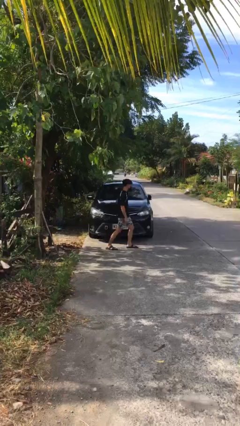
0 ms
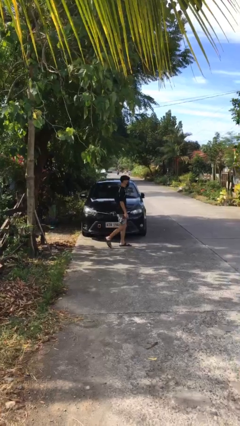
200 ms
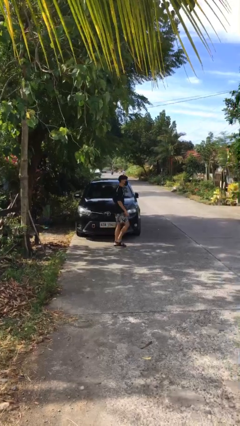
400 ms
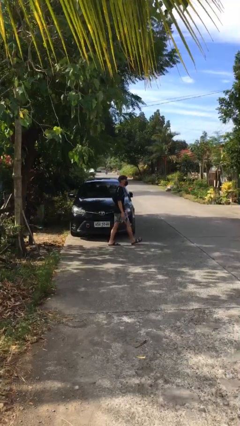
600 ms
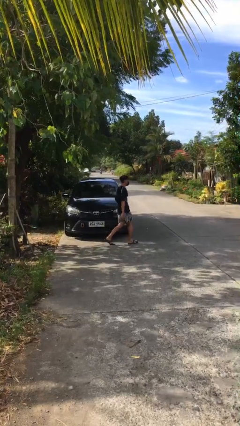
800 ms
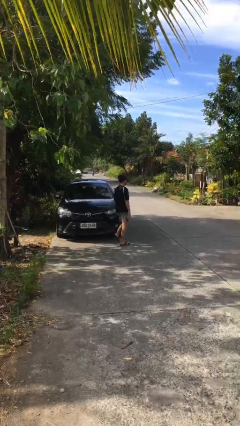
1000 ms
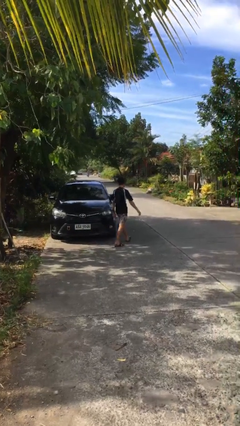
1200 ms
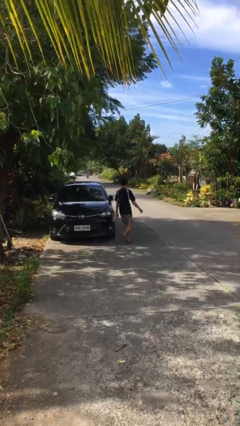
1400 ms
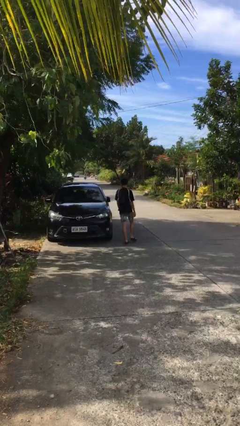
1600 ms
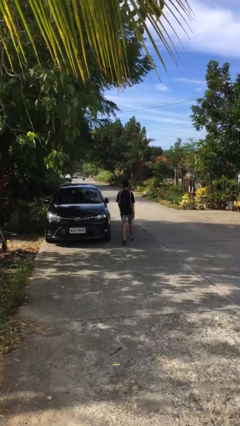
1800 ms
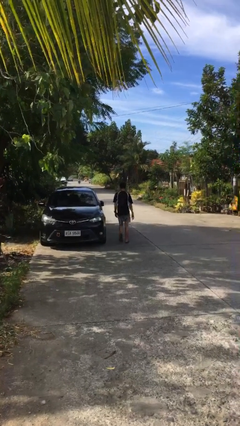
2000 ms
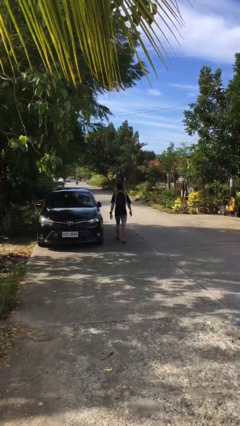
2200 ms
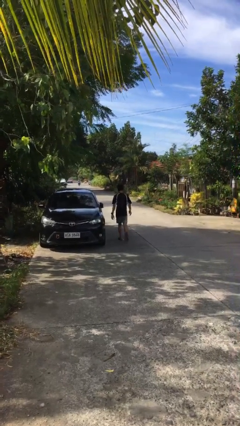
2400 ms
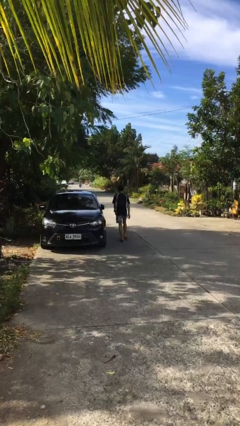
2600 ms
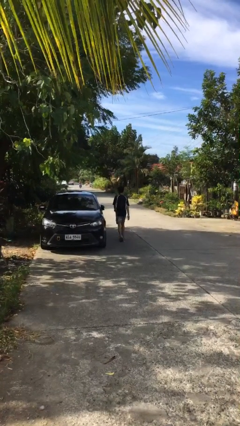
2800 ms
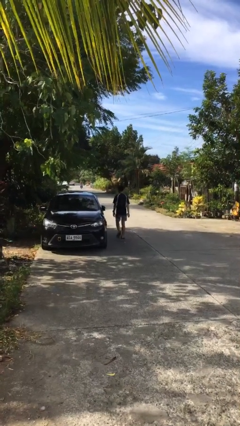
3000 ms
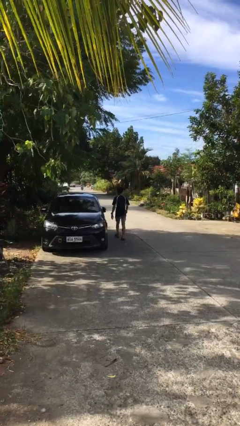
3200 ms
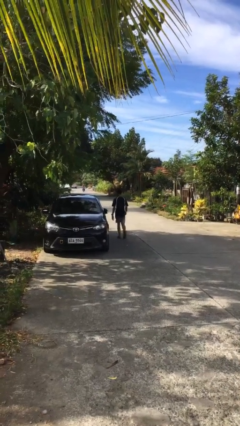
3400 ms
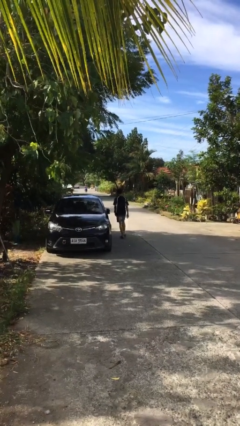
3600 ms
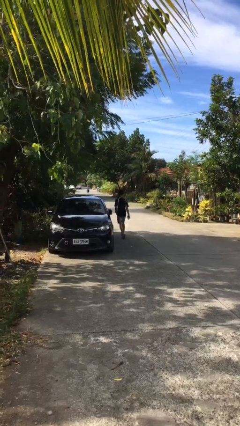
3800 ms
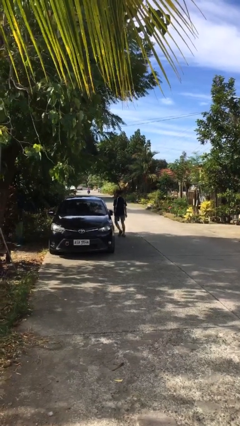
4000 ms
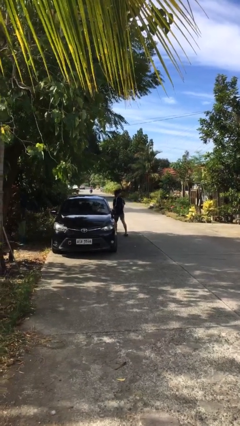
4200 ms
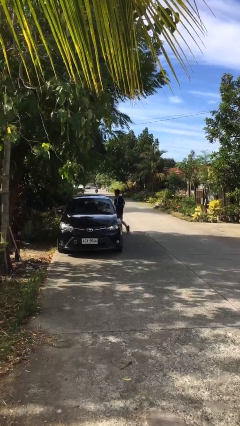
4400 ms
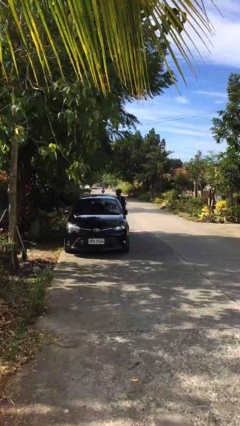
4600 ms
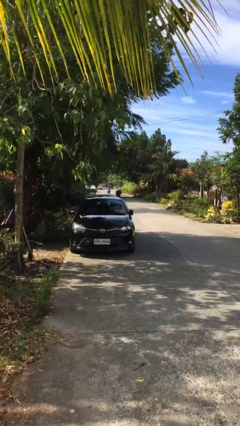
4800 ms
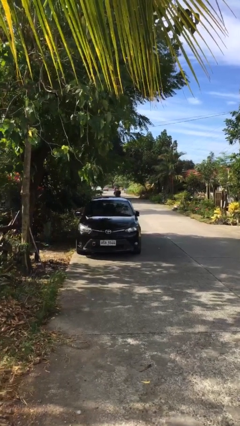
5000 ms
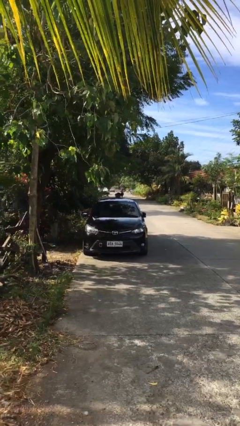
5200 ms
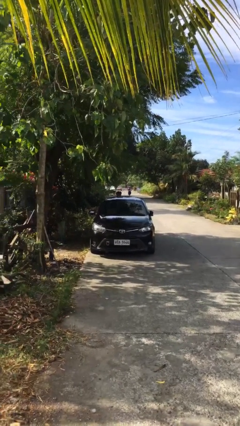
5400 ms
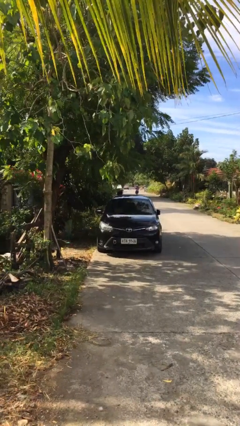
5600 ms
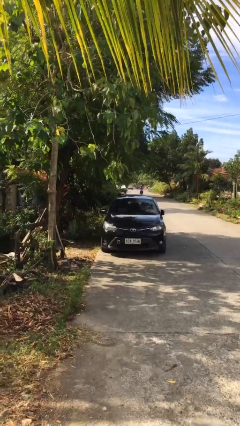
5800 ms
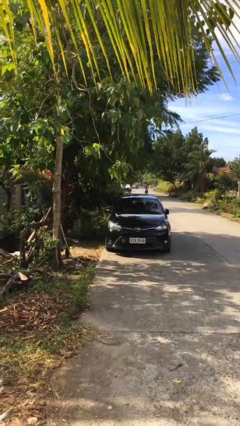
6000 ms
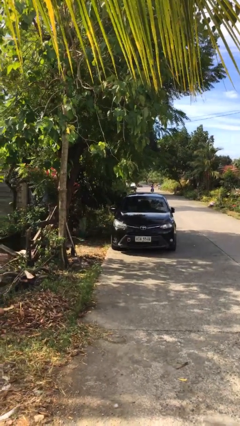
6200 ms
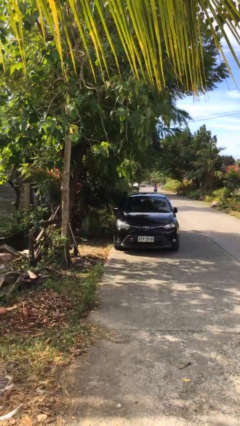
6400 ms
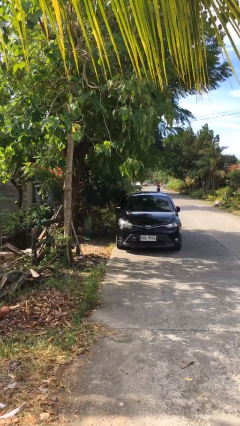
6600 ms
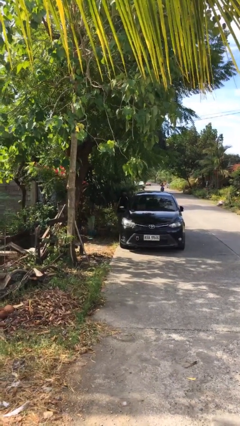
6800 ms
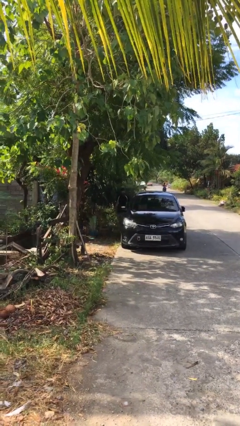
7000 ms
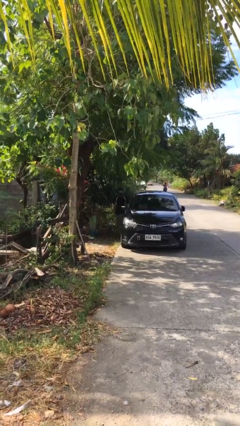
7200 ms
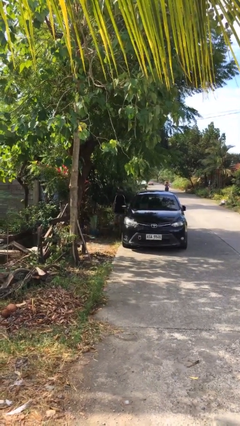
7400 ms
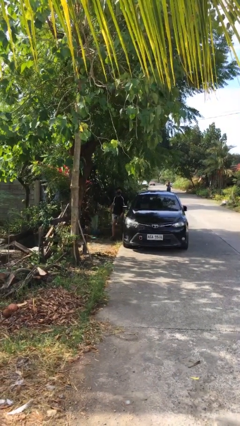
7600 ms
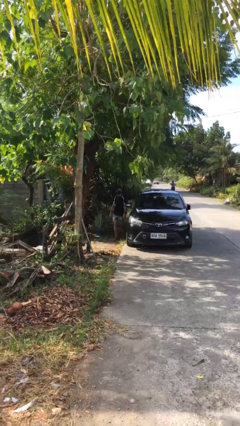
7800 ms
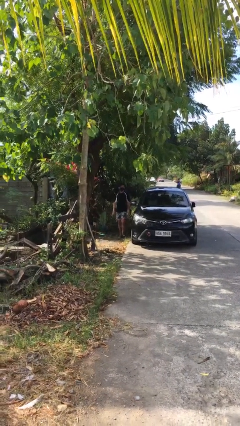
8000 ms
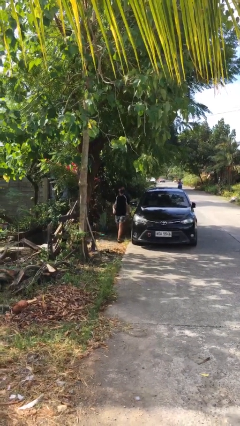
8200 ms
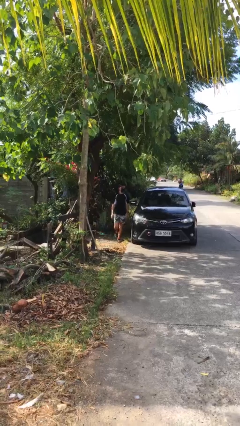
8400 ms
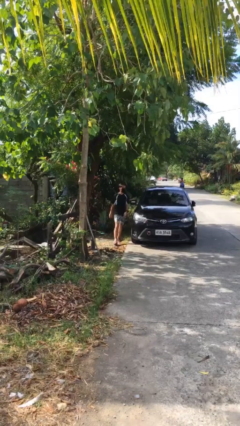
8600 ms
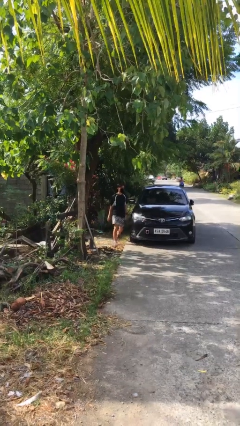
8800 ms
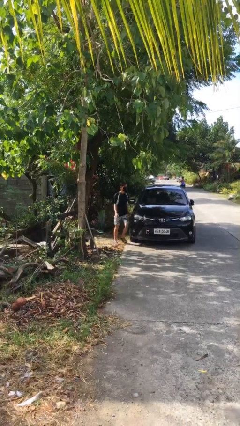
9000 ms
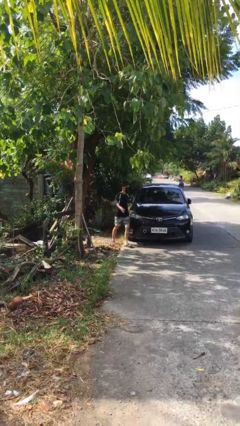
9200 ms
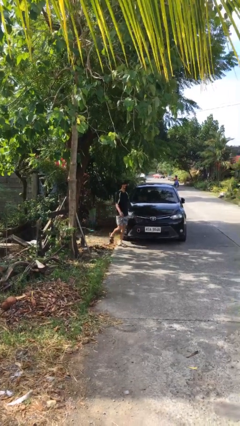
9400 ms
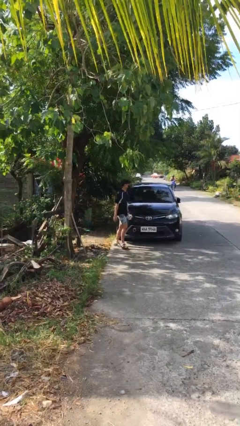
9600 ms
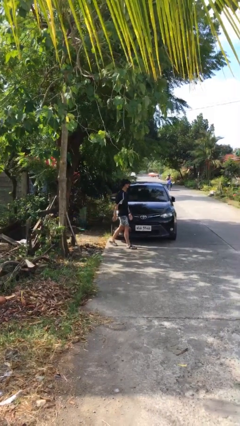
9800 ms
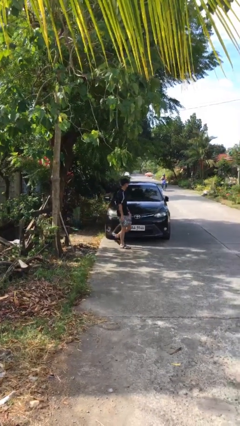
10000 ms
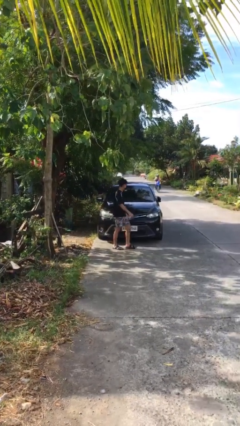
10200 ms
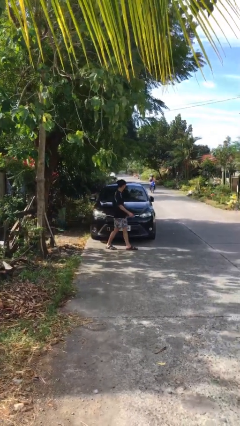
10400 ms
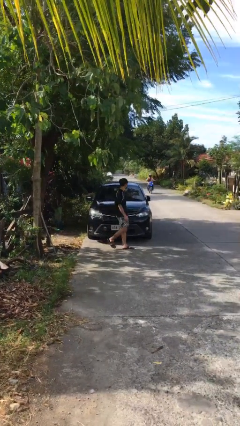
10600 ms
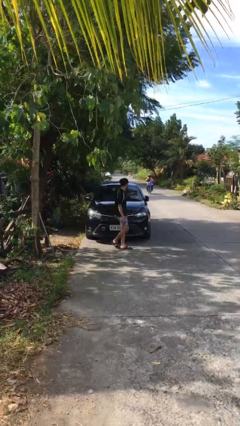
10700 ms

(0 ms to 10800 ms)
person walks around car

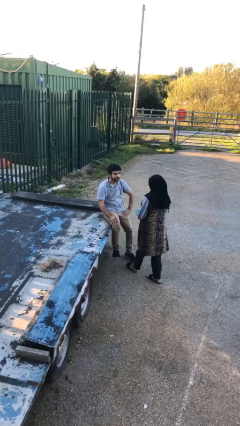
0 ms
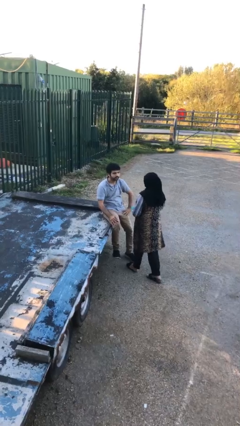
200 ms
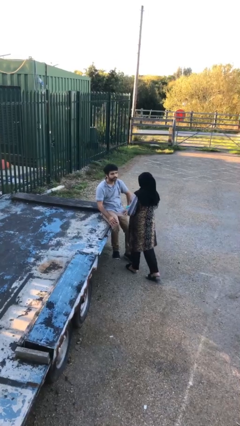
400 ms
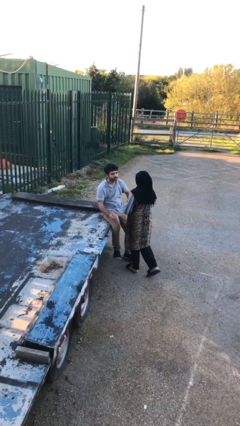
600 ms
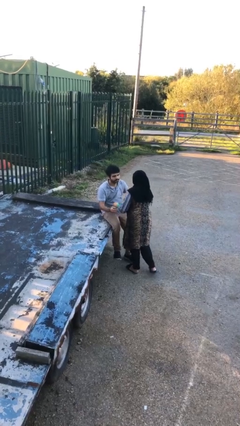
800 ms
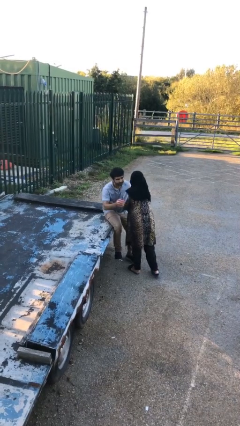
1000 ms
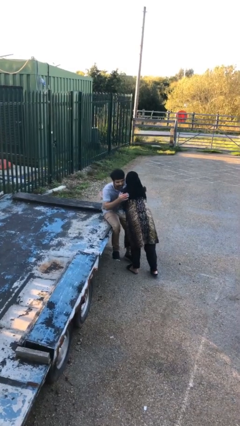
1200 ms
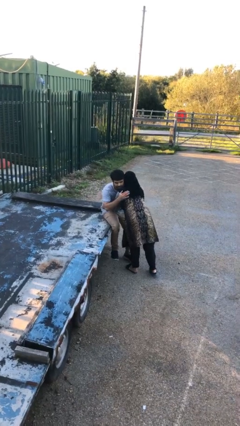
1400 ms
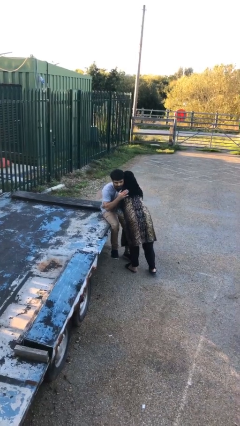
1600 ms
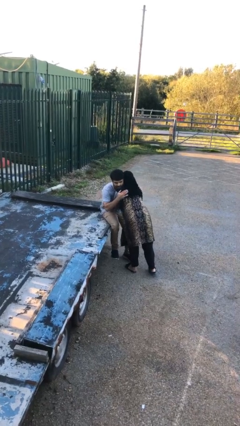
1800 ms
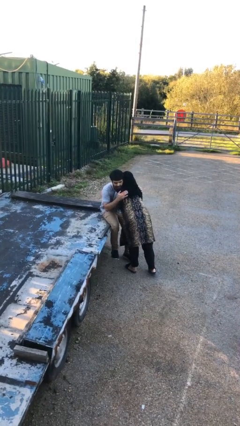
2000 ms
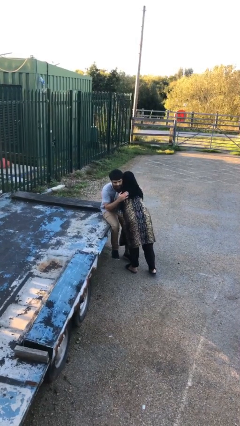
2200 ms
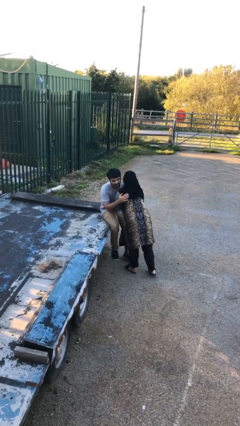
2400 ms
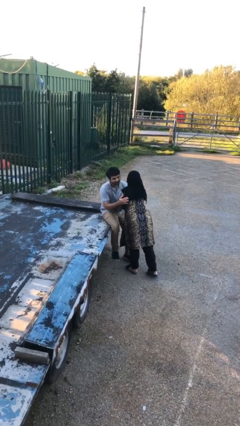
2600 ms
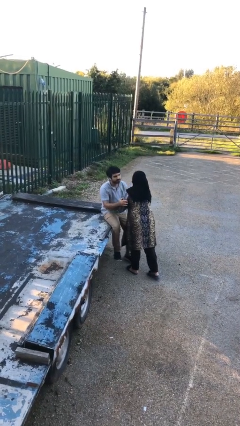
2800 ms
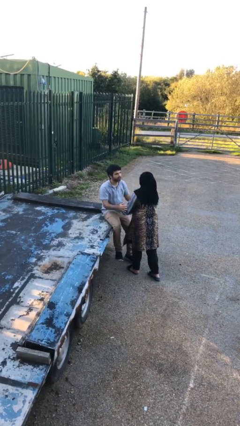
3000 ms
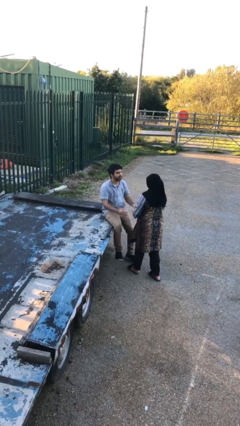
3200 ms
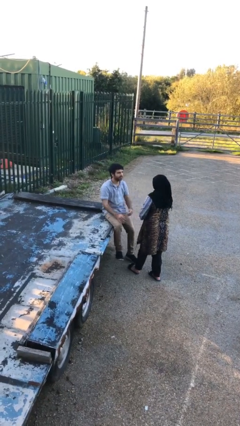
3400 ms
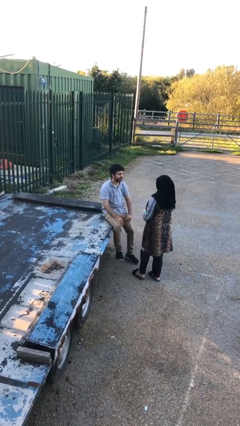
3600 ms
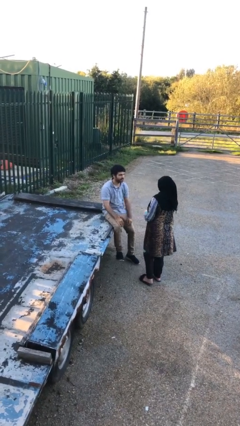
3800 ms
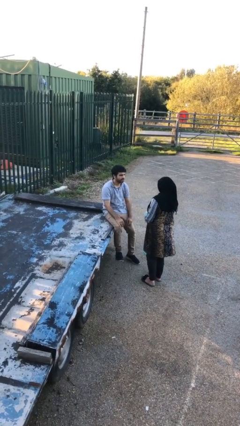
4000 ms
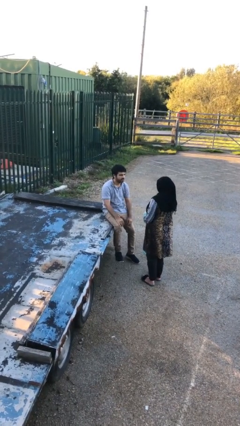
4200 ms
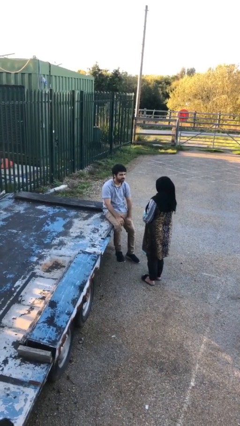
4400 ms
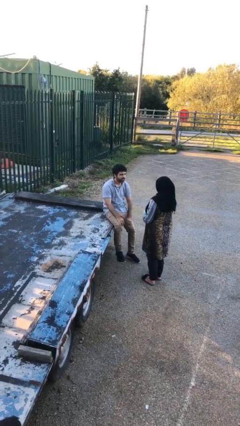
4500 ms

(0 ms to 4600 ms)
person embraces person

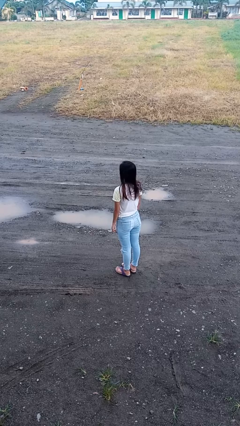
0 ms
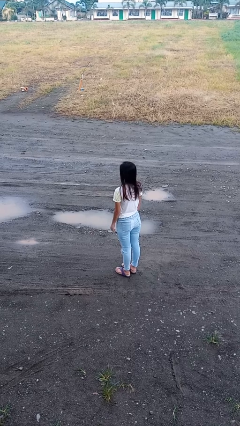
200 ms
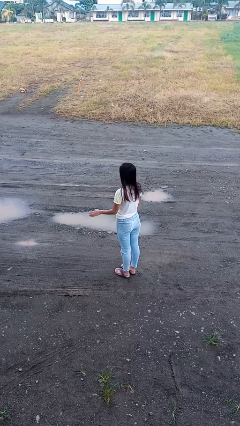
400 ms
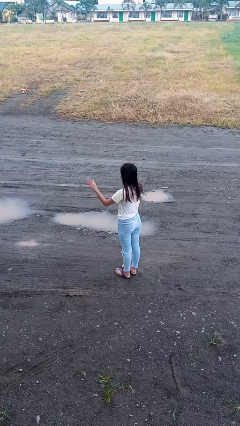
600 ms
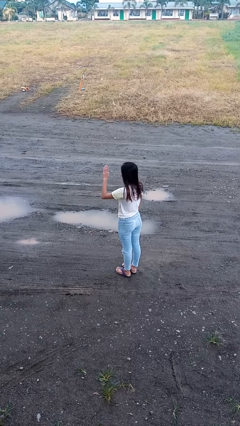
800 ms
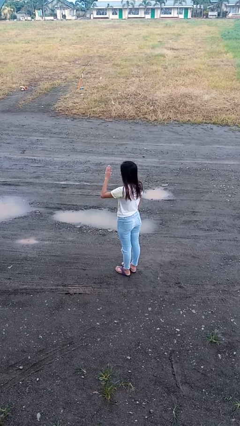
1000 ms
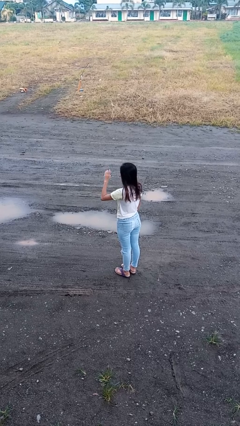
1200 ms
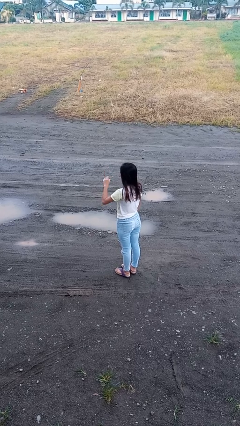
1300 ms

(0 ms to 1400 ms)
person gestures swipe right

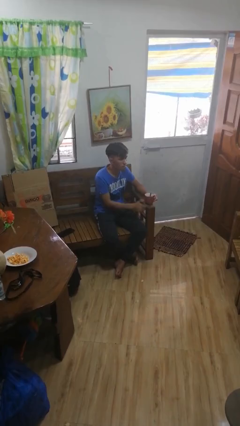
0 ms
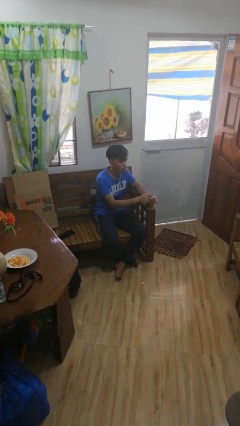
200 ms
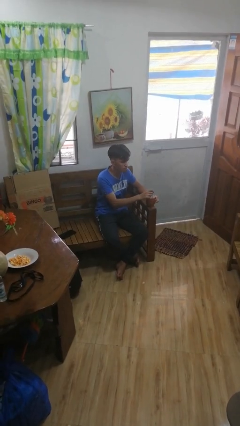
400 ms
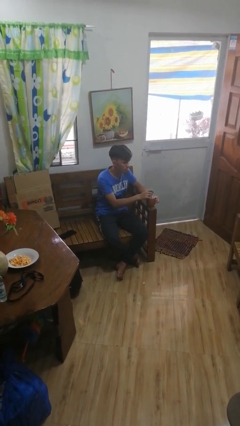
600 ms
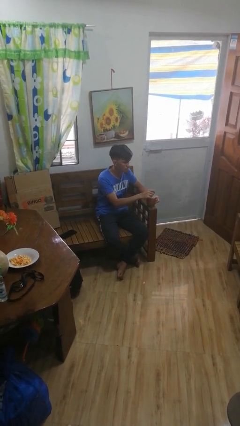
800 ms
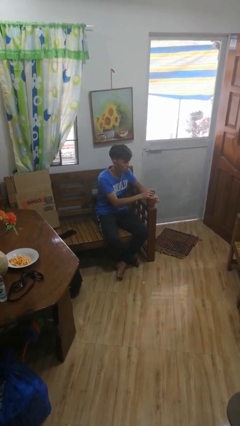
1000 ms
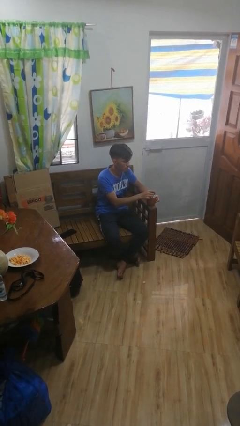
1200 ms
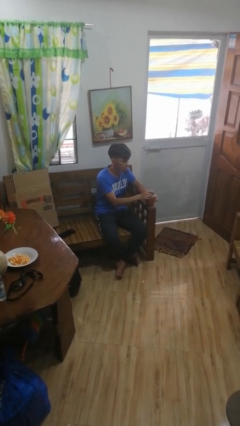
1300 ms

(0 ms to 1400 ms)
person stirs mug
